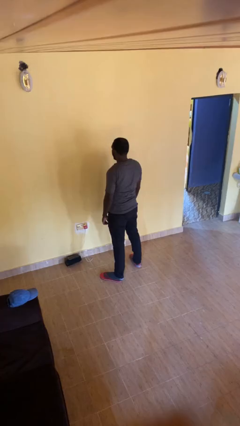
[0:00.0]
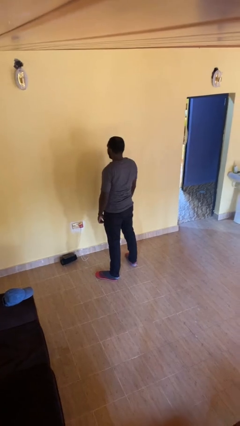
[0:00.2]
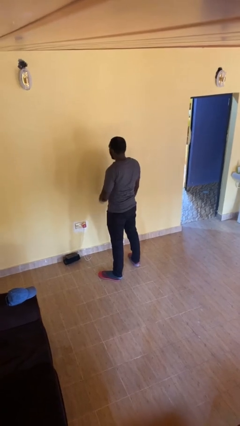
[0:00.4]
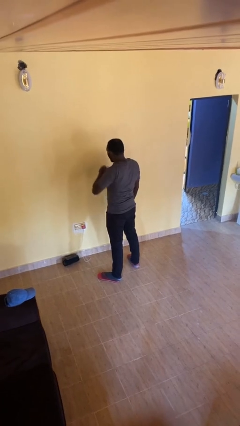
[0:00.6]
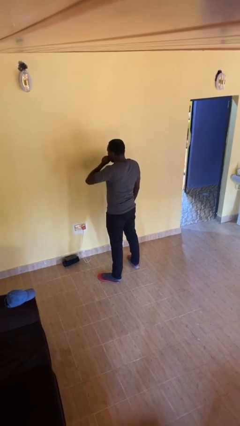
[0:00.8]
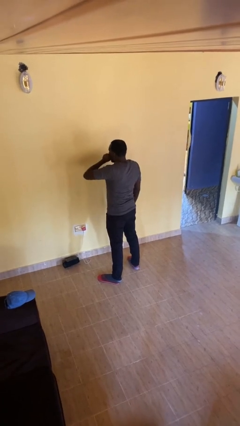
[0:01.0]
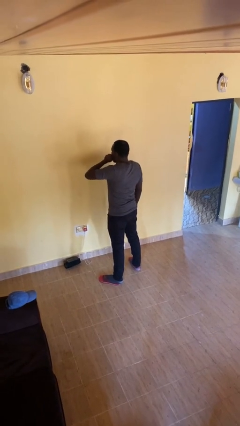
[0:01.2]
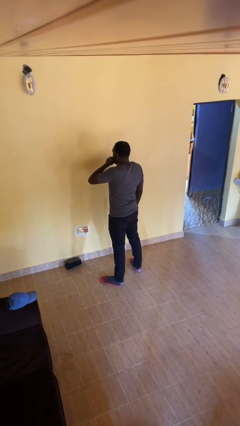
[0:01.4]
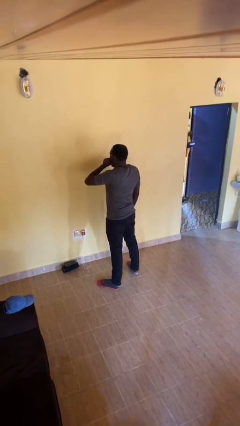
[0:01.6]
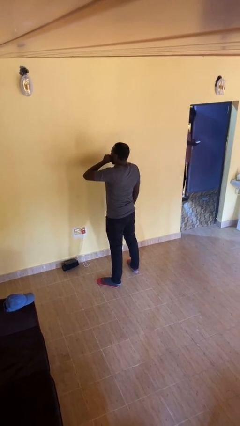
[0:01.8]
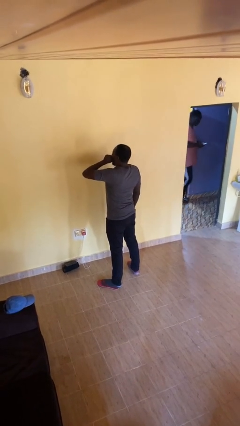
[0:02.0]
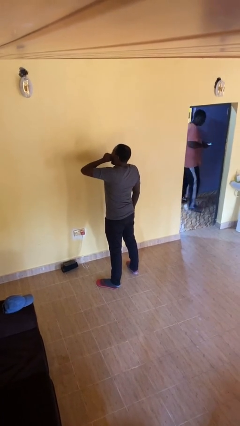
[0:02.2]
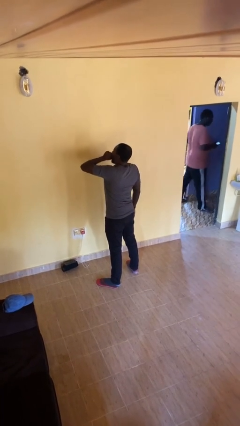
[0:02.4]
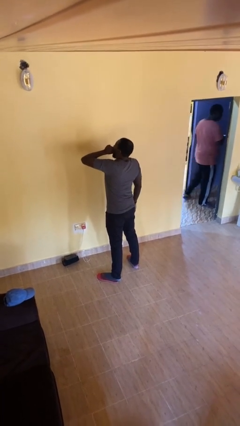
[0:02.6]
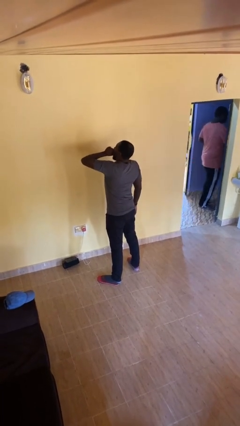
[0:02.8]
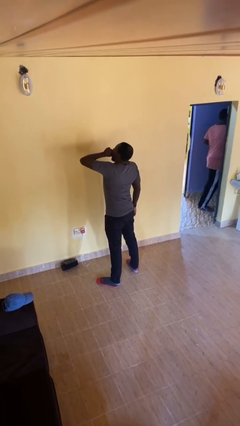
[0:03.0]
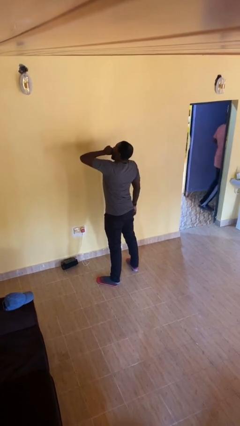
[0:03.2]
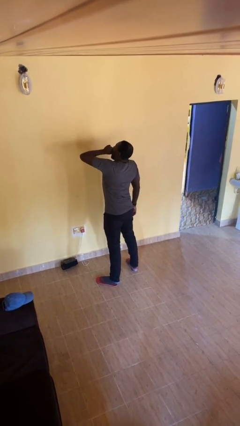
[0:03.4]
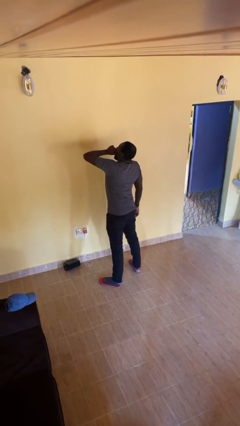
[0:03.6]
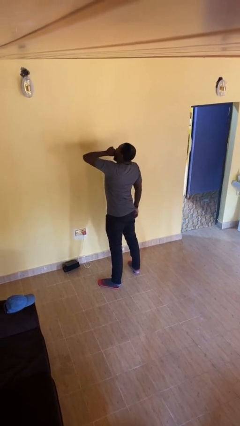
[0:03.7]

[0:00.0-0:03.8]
person yawns

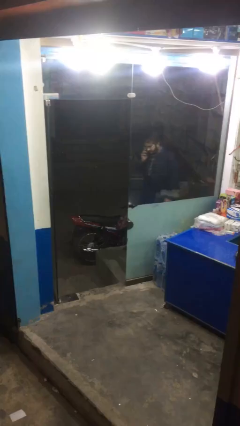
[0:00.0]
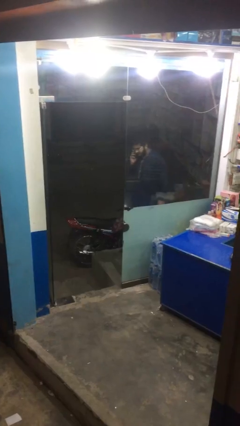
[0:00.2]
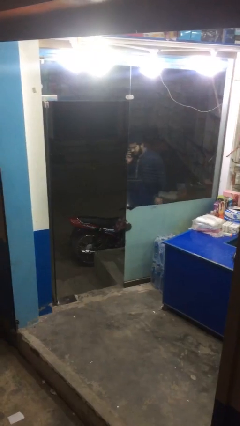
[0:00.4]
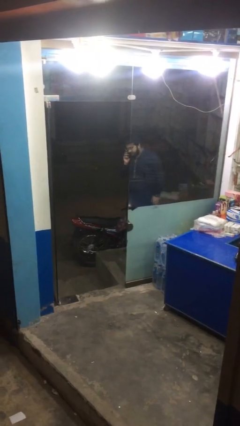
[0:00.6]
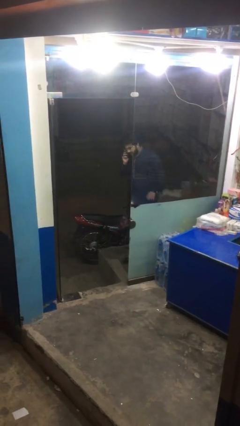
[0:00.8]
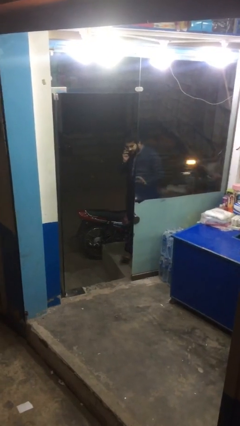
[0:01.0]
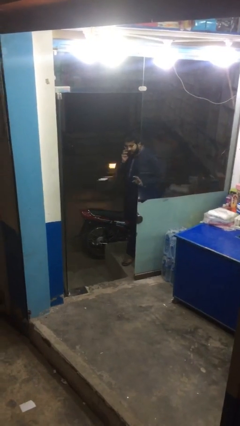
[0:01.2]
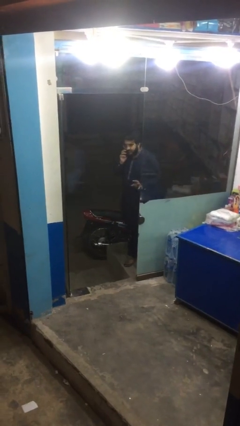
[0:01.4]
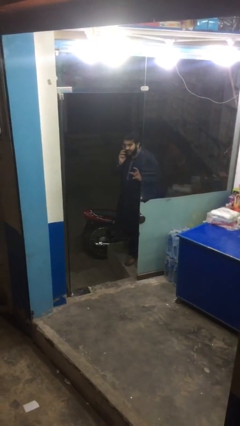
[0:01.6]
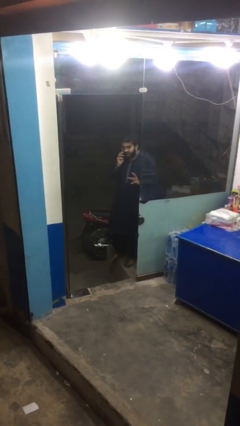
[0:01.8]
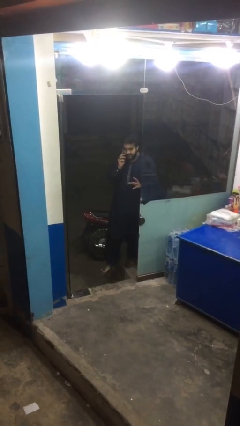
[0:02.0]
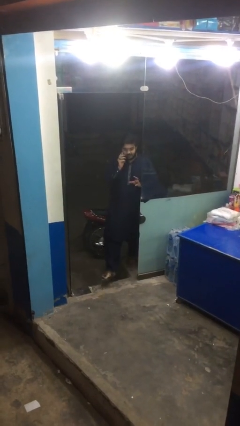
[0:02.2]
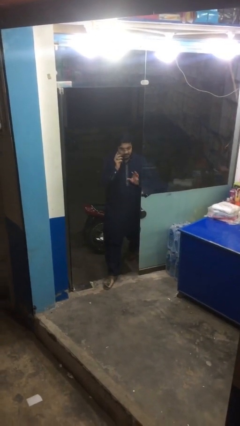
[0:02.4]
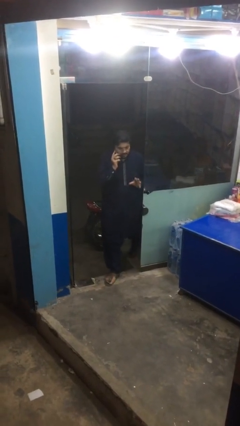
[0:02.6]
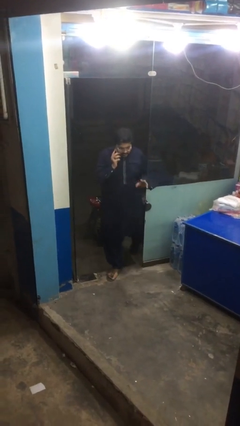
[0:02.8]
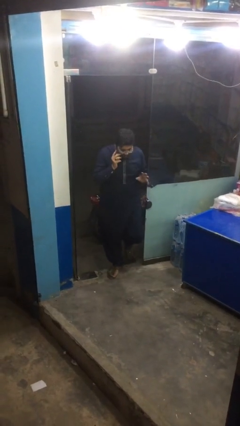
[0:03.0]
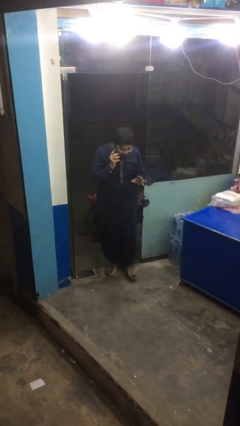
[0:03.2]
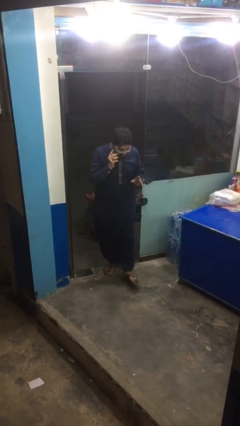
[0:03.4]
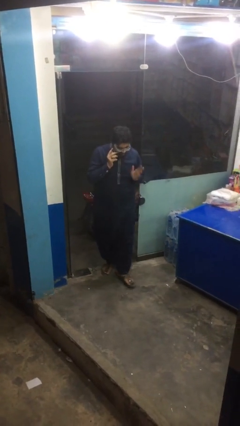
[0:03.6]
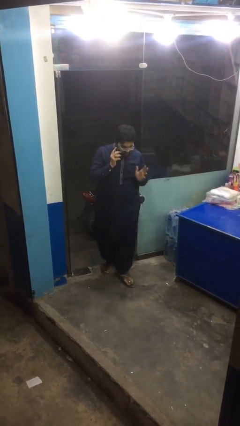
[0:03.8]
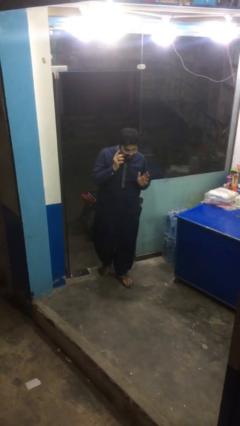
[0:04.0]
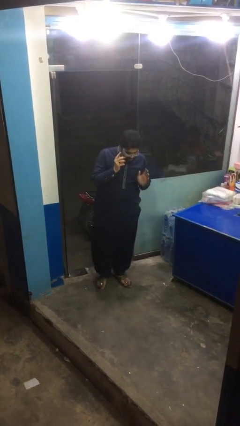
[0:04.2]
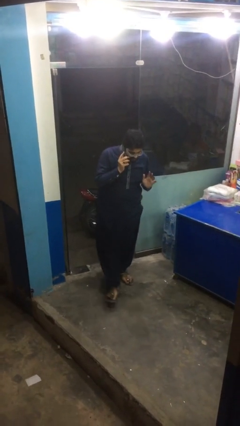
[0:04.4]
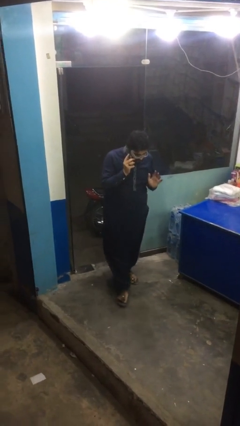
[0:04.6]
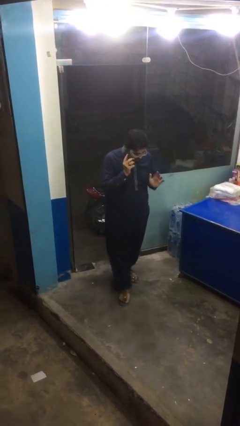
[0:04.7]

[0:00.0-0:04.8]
person enters scene through structure

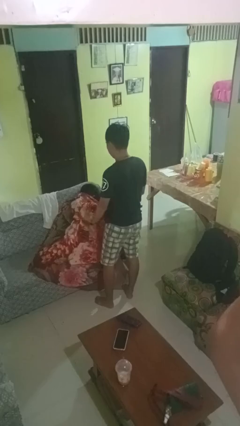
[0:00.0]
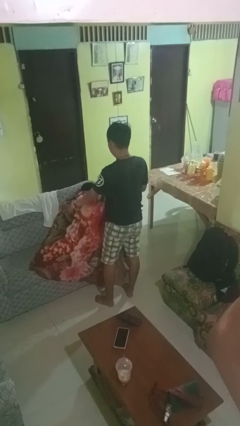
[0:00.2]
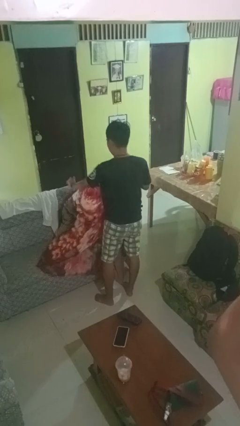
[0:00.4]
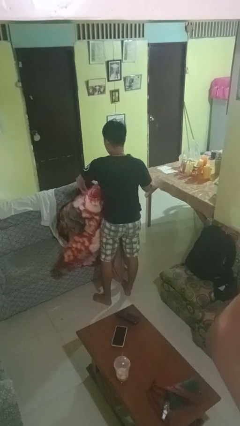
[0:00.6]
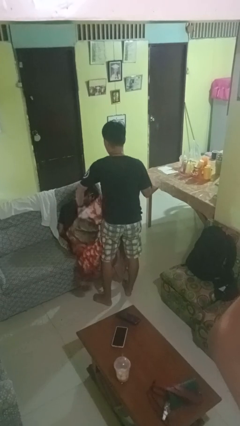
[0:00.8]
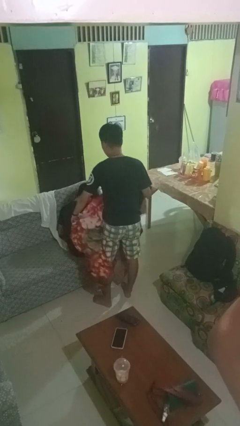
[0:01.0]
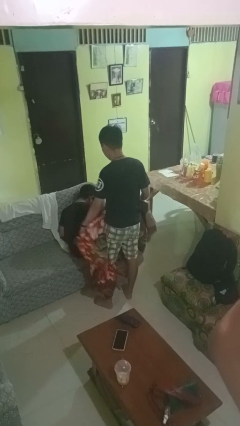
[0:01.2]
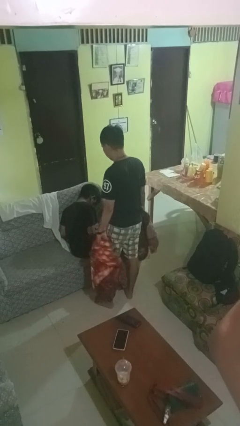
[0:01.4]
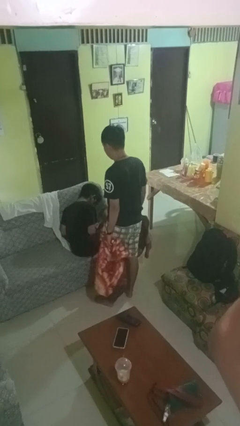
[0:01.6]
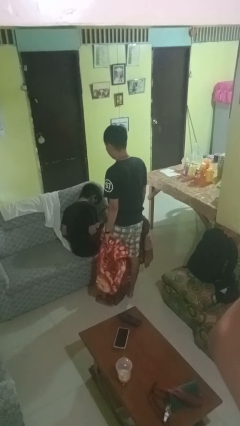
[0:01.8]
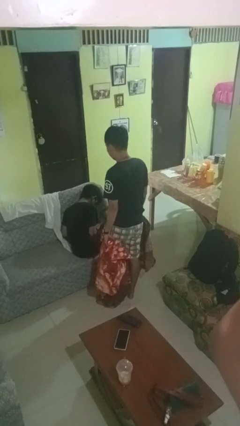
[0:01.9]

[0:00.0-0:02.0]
person uncovers friend with blanket

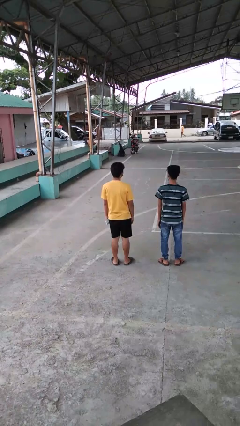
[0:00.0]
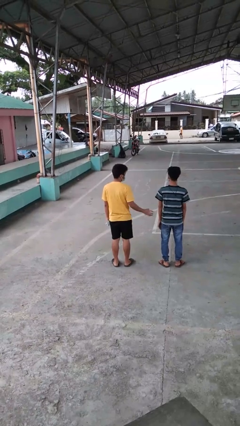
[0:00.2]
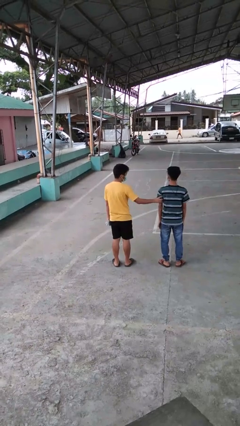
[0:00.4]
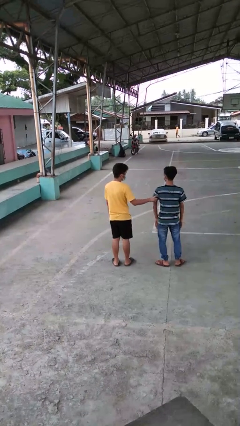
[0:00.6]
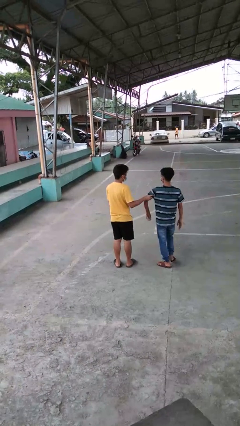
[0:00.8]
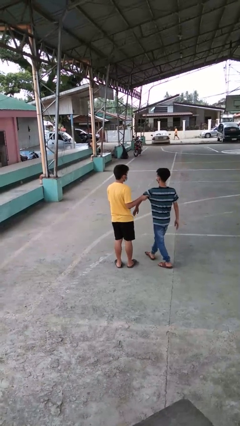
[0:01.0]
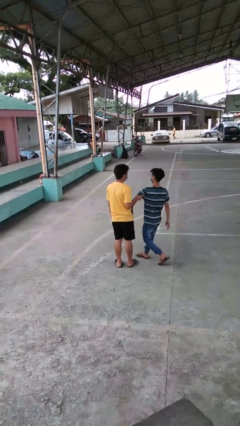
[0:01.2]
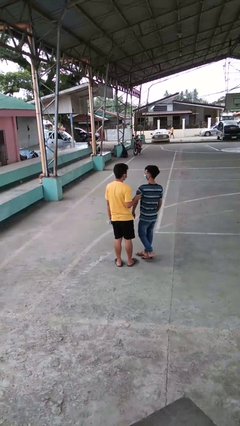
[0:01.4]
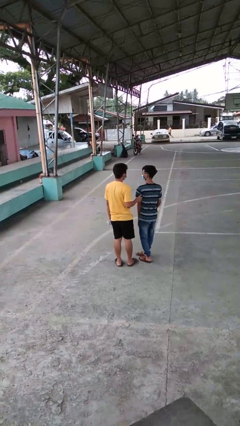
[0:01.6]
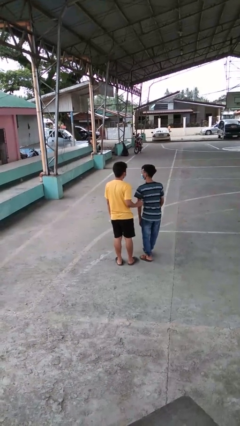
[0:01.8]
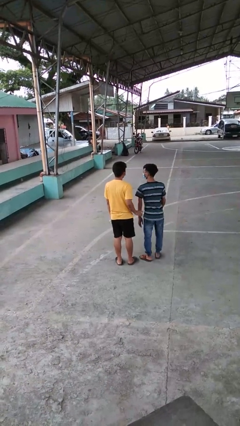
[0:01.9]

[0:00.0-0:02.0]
person grabs person by bicep

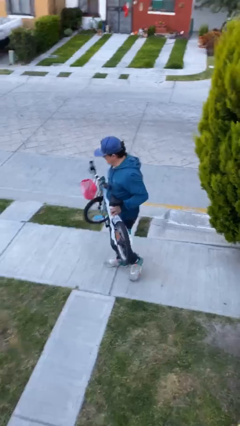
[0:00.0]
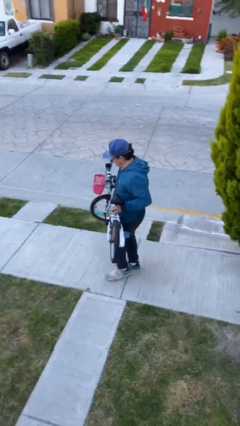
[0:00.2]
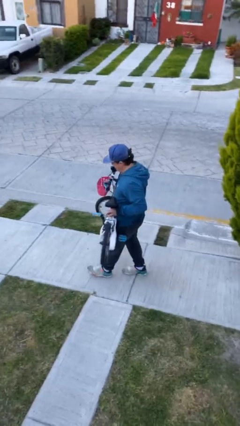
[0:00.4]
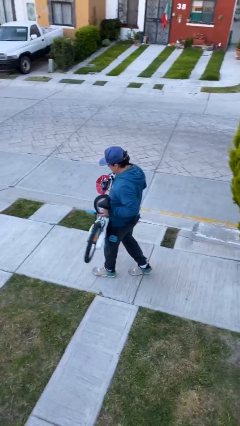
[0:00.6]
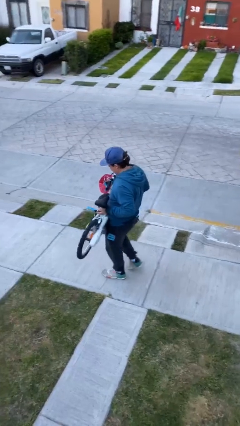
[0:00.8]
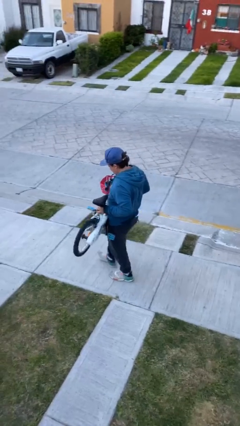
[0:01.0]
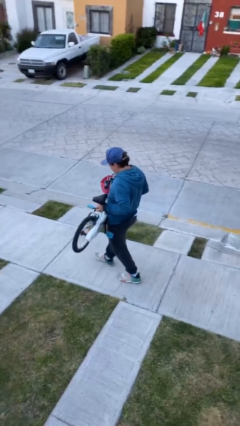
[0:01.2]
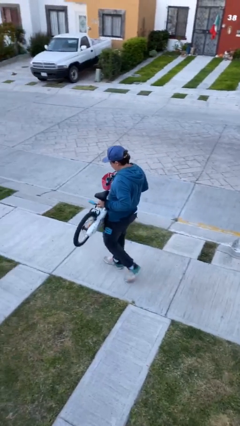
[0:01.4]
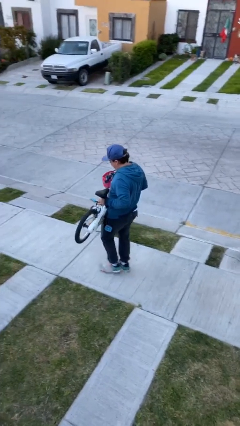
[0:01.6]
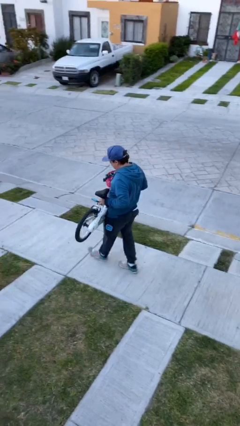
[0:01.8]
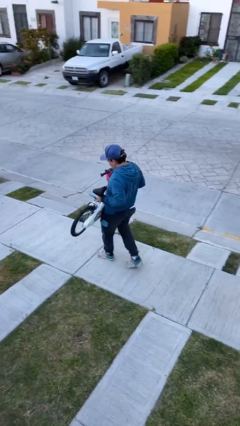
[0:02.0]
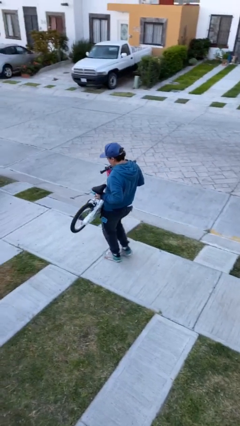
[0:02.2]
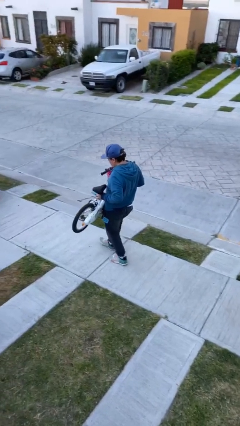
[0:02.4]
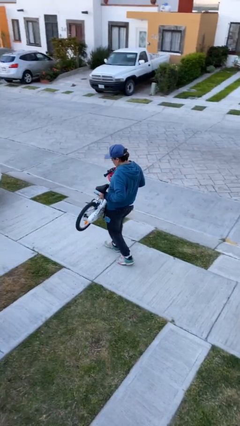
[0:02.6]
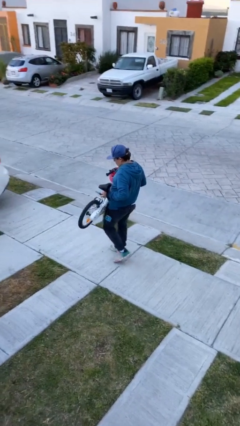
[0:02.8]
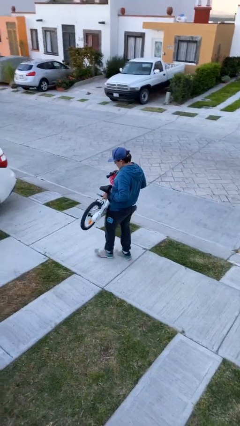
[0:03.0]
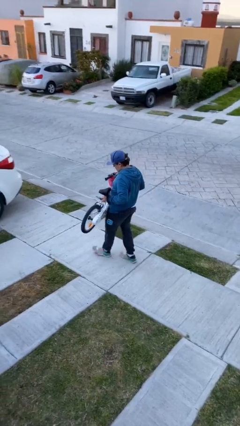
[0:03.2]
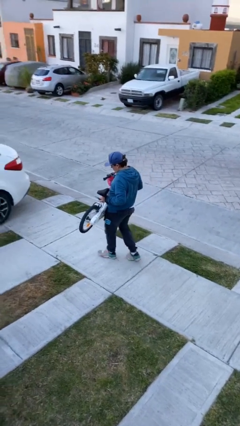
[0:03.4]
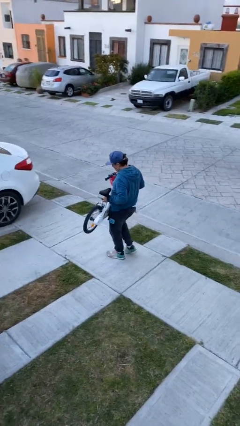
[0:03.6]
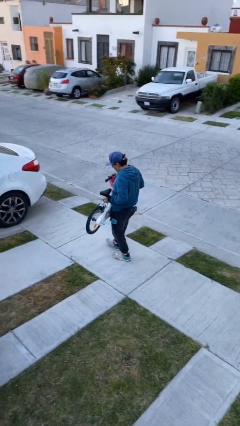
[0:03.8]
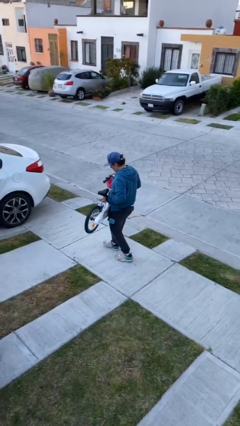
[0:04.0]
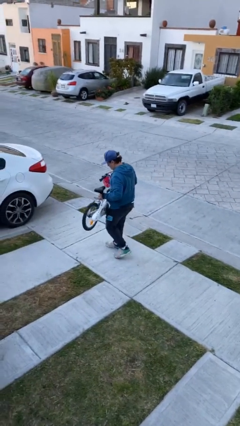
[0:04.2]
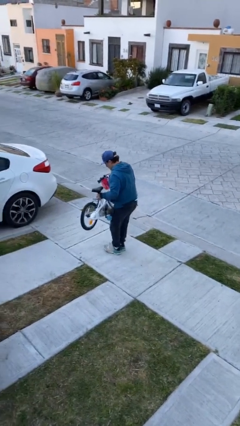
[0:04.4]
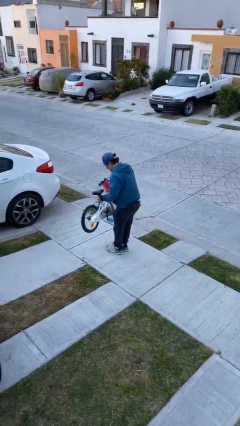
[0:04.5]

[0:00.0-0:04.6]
person carries heavy object

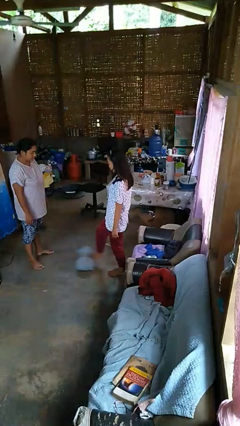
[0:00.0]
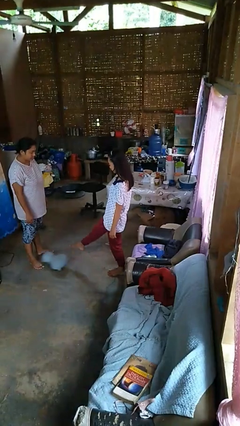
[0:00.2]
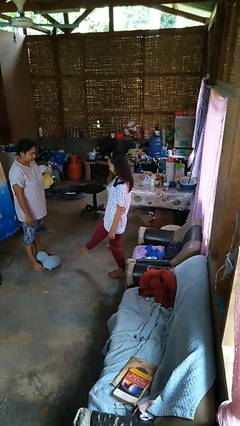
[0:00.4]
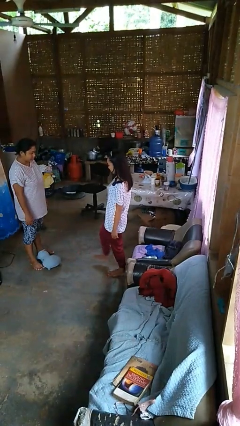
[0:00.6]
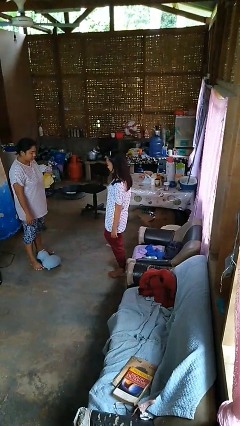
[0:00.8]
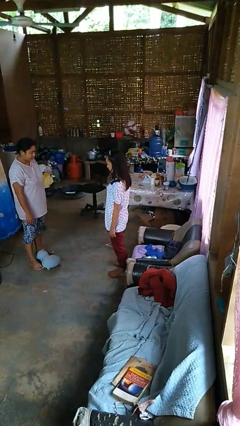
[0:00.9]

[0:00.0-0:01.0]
person kicks object to person
